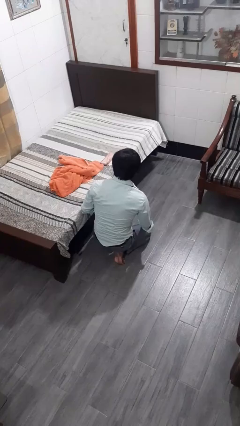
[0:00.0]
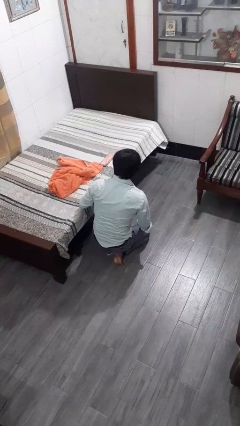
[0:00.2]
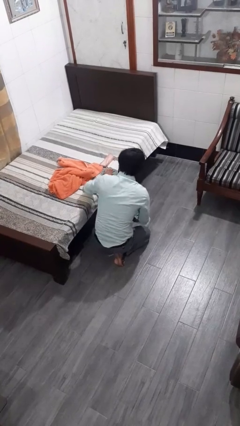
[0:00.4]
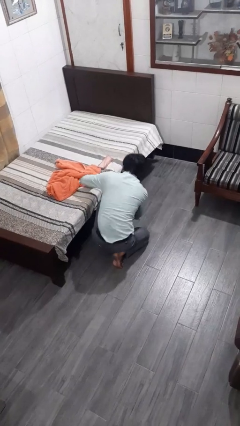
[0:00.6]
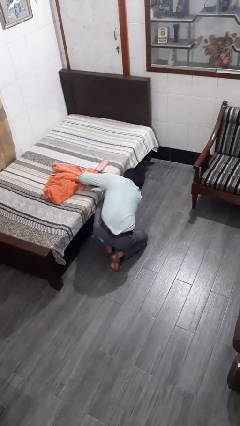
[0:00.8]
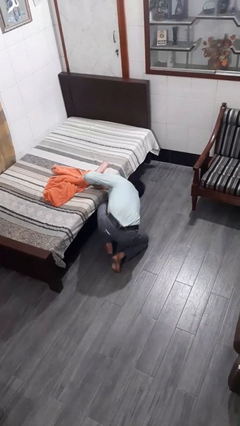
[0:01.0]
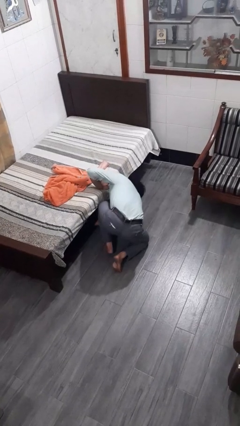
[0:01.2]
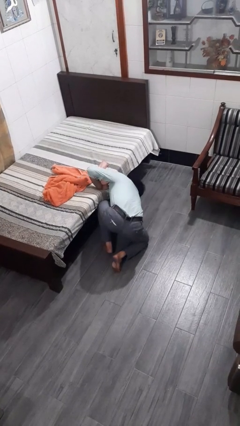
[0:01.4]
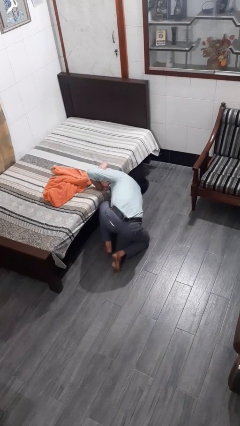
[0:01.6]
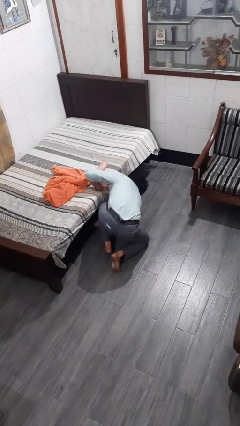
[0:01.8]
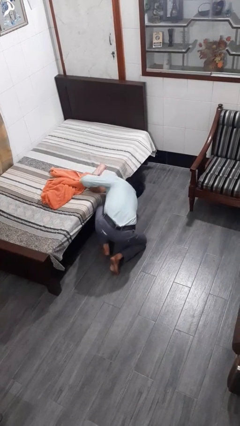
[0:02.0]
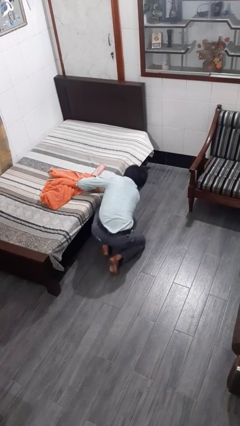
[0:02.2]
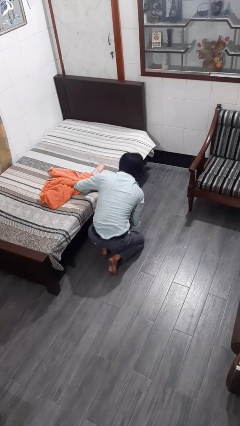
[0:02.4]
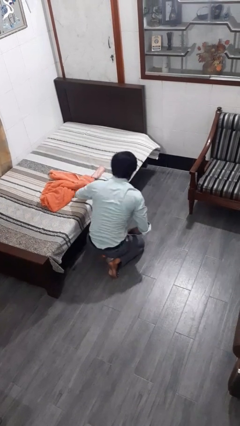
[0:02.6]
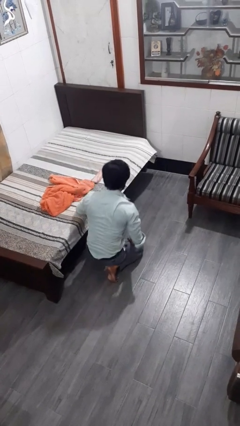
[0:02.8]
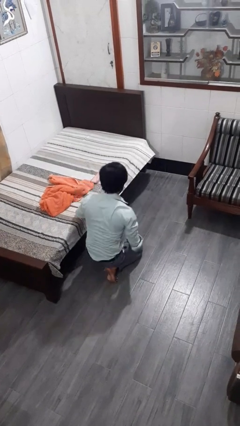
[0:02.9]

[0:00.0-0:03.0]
person searches under bed

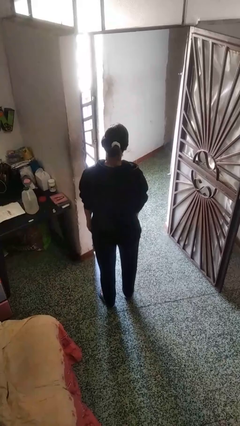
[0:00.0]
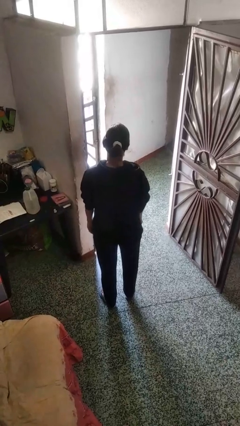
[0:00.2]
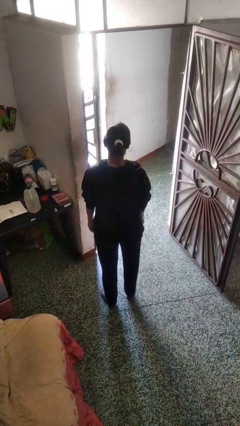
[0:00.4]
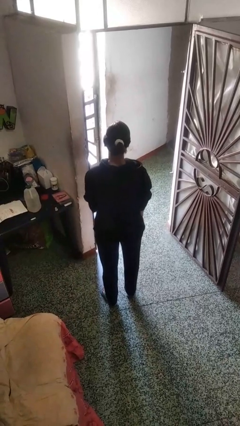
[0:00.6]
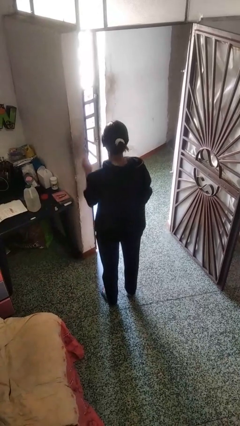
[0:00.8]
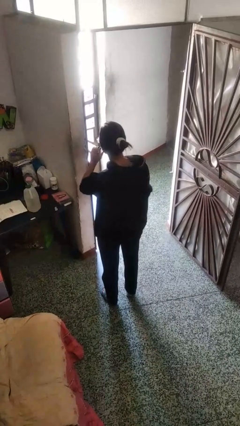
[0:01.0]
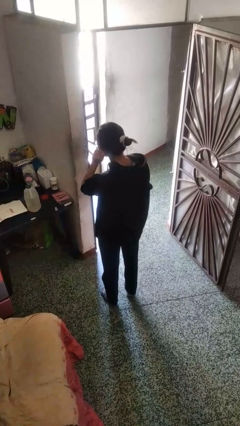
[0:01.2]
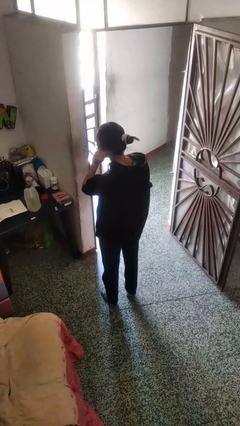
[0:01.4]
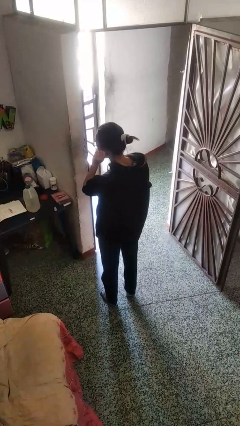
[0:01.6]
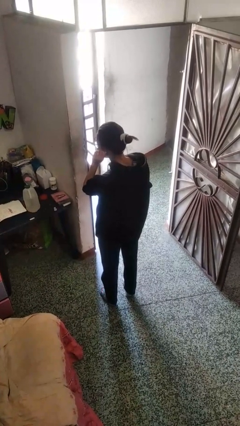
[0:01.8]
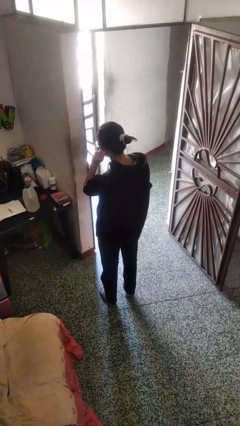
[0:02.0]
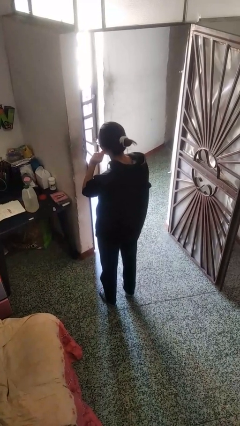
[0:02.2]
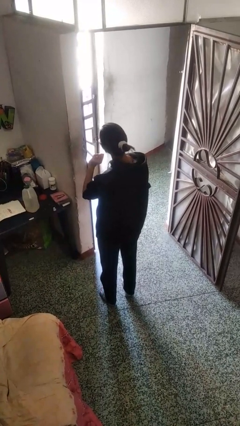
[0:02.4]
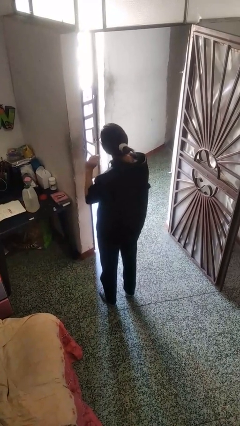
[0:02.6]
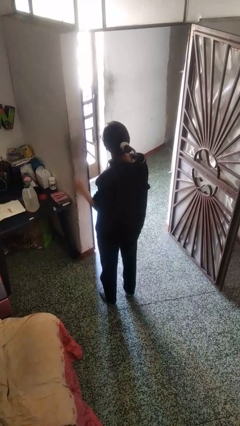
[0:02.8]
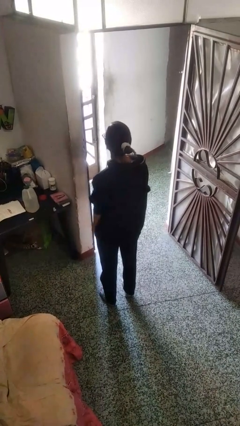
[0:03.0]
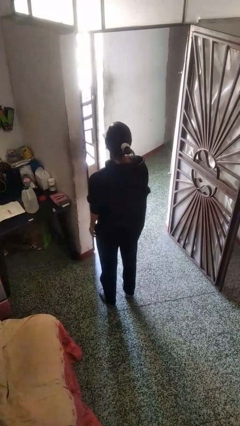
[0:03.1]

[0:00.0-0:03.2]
person touches earlobe

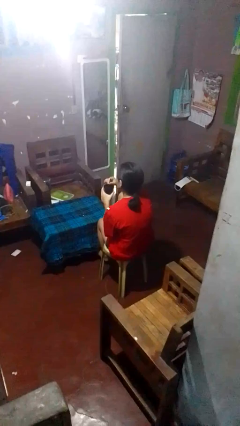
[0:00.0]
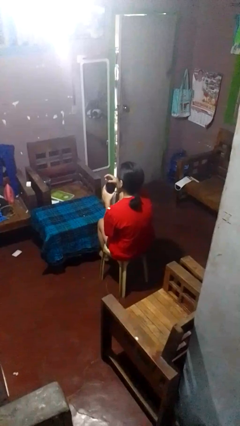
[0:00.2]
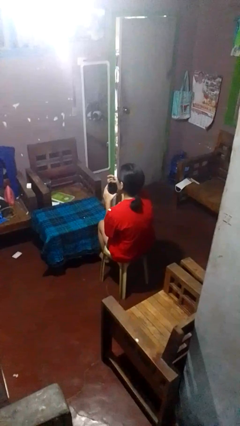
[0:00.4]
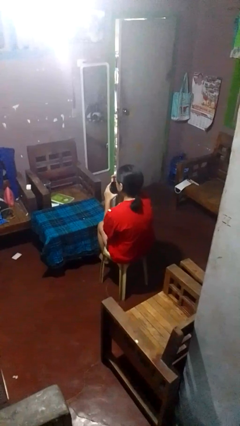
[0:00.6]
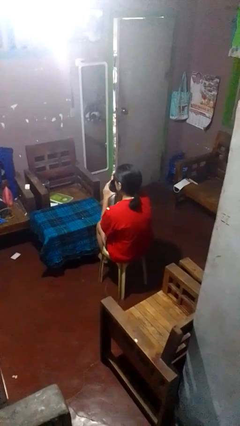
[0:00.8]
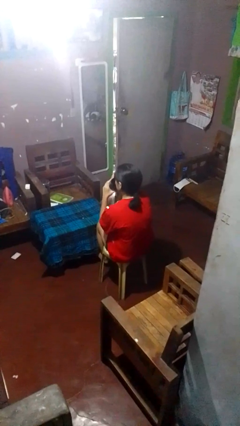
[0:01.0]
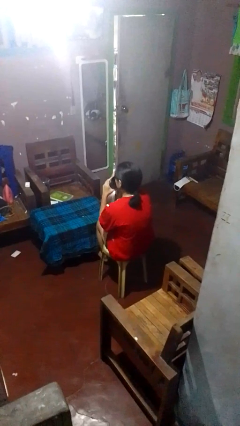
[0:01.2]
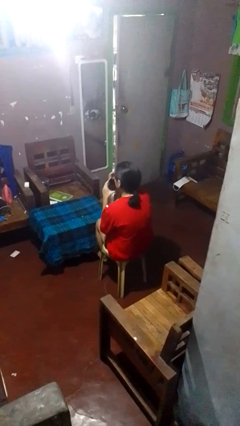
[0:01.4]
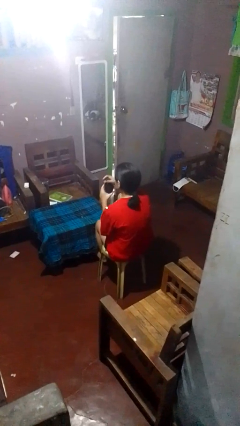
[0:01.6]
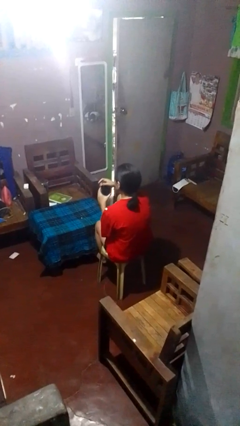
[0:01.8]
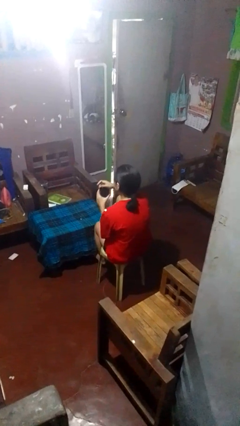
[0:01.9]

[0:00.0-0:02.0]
person drinks from mug

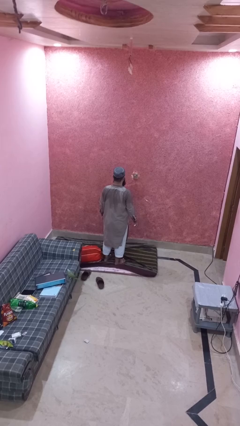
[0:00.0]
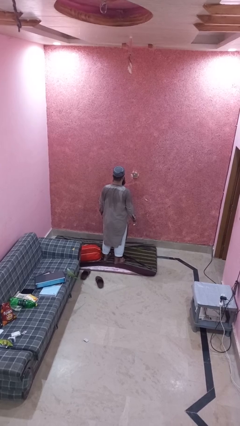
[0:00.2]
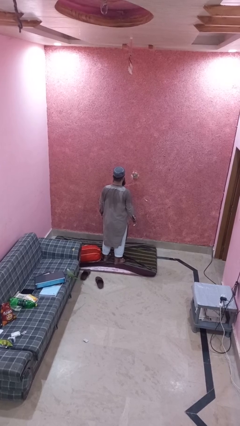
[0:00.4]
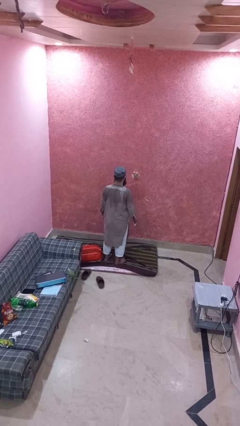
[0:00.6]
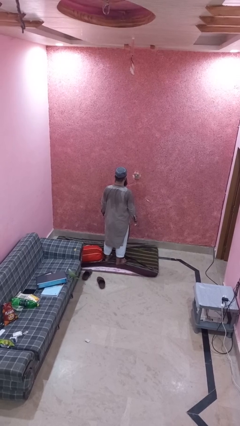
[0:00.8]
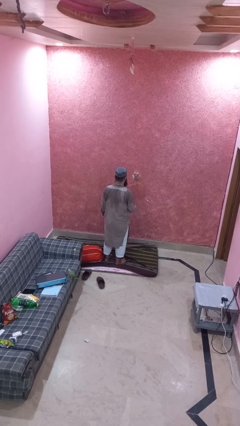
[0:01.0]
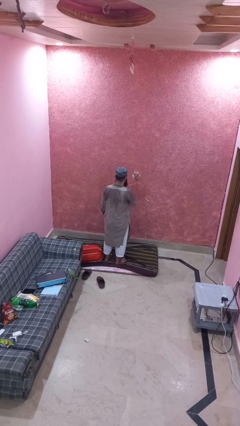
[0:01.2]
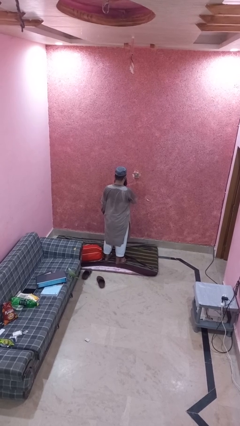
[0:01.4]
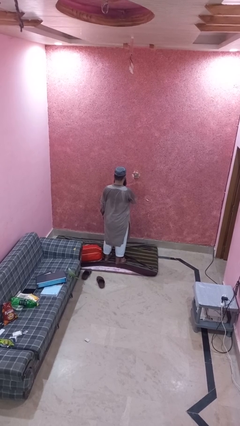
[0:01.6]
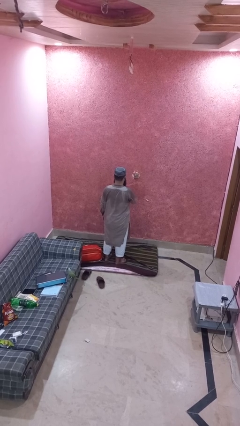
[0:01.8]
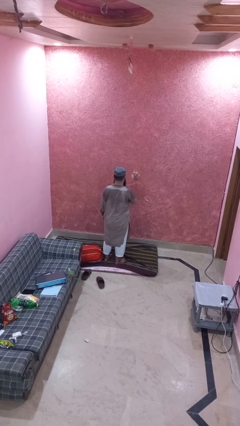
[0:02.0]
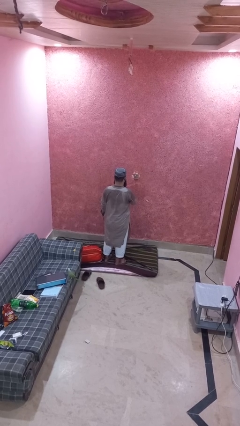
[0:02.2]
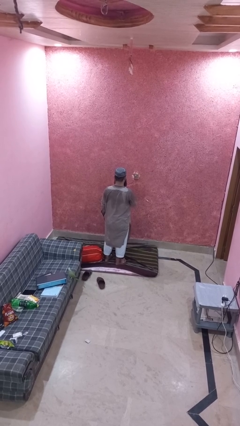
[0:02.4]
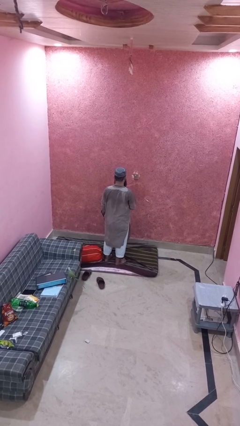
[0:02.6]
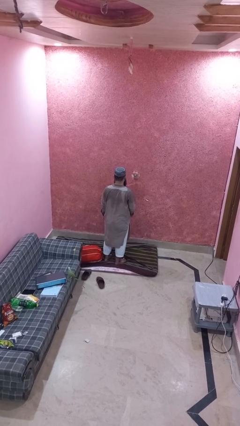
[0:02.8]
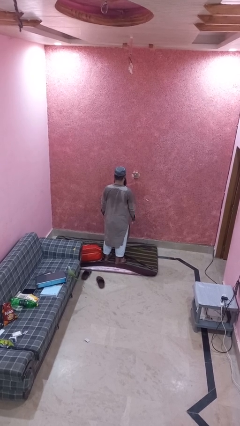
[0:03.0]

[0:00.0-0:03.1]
person wipes mouth with napkin

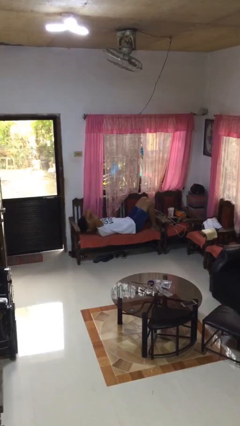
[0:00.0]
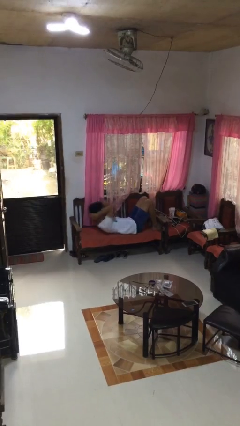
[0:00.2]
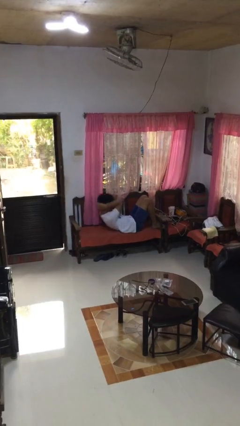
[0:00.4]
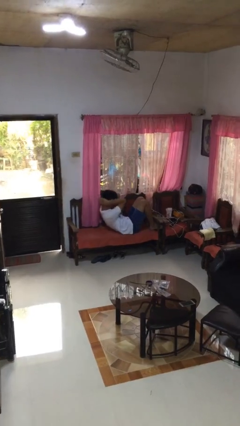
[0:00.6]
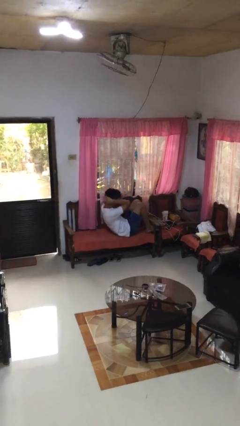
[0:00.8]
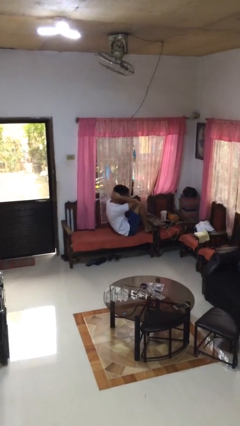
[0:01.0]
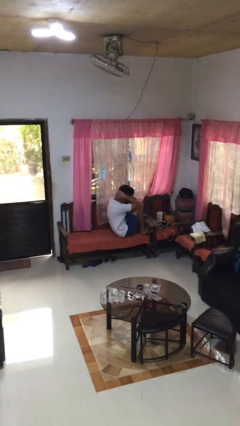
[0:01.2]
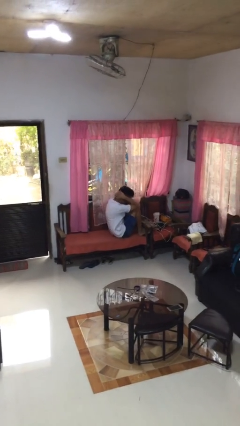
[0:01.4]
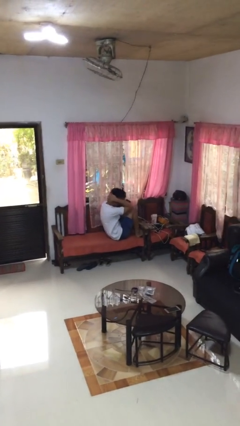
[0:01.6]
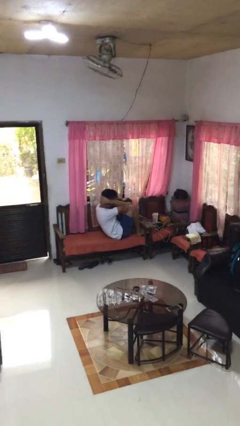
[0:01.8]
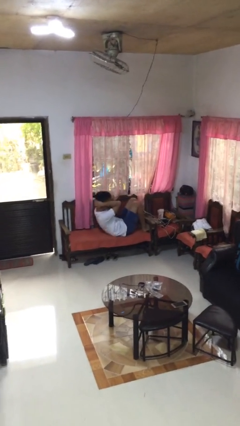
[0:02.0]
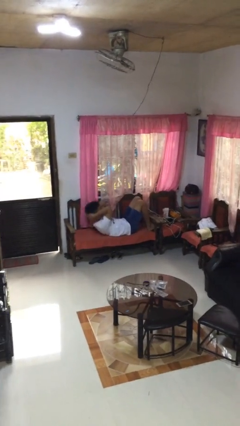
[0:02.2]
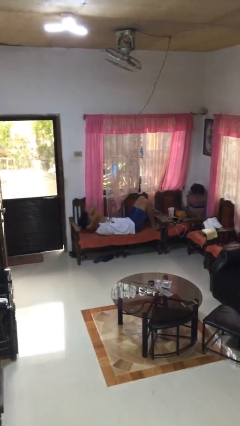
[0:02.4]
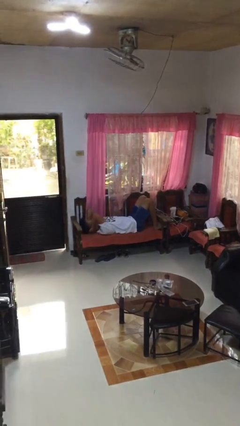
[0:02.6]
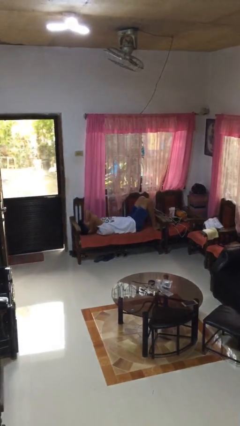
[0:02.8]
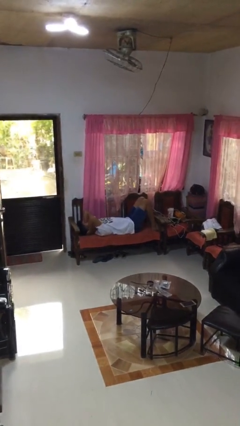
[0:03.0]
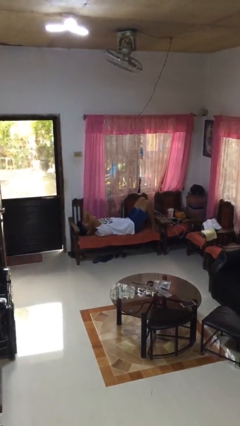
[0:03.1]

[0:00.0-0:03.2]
person exercises with situp

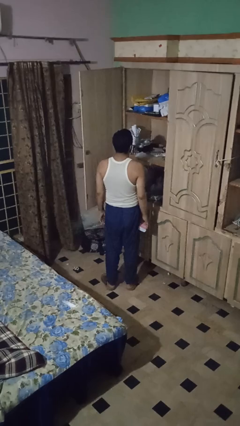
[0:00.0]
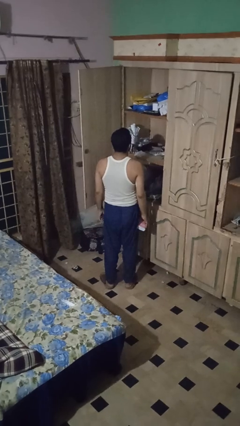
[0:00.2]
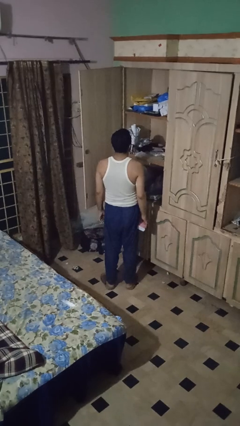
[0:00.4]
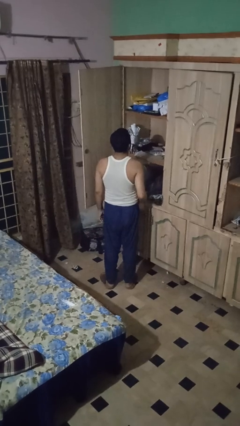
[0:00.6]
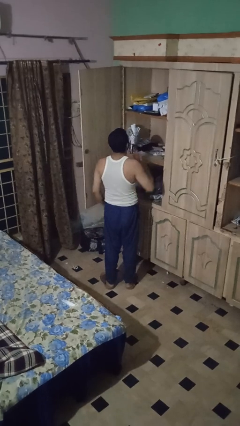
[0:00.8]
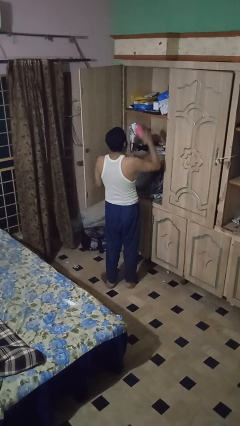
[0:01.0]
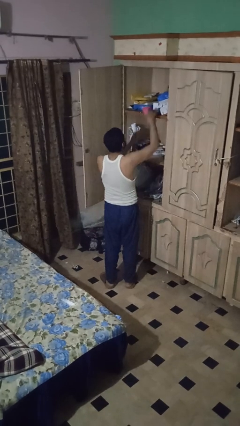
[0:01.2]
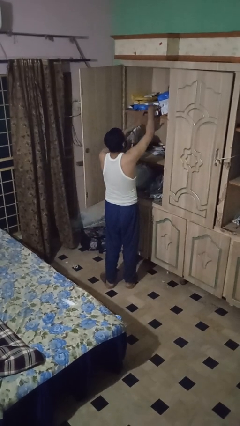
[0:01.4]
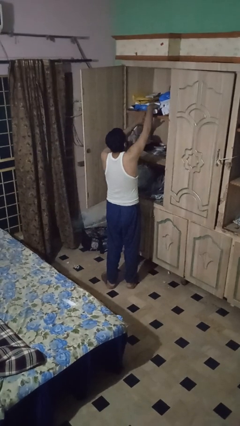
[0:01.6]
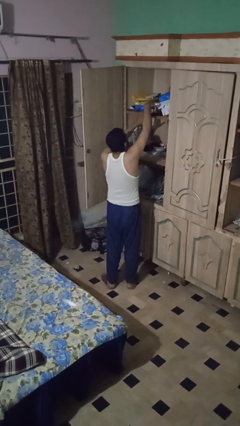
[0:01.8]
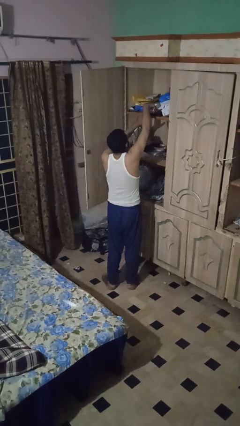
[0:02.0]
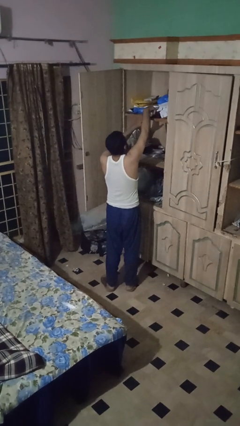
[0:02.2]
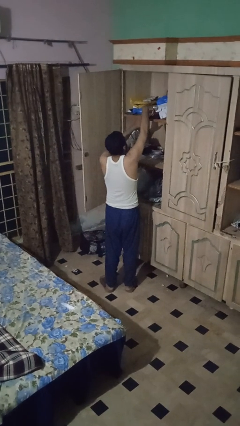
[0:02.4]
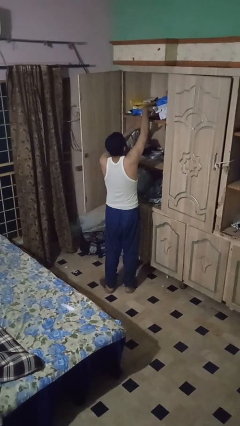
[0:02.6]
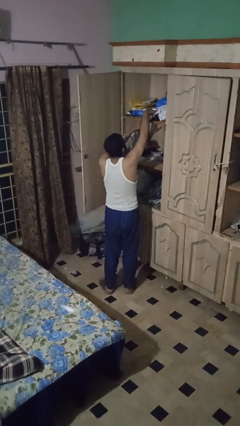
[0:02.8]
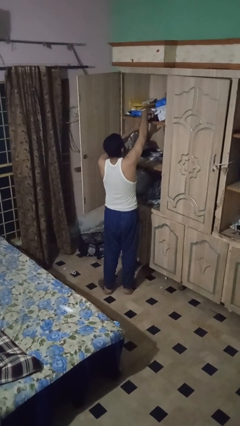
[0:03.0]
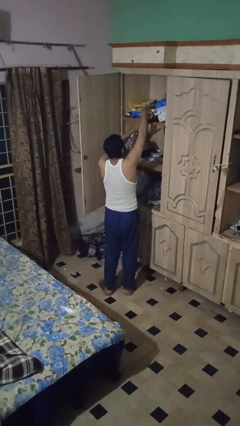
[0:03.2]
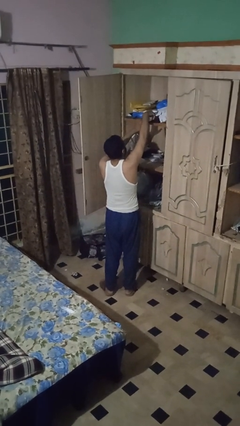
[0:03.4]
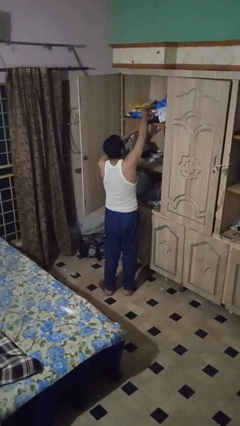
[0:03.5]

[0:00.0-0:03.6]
person dusts furniture
